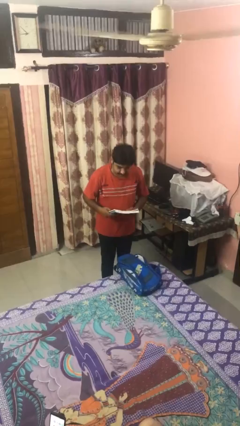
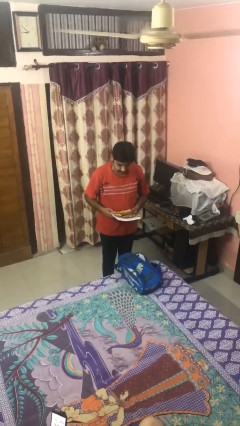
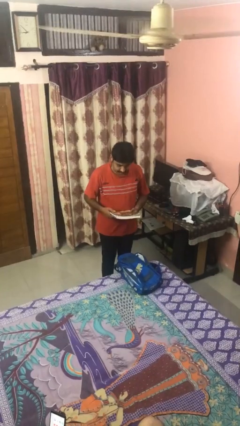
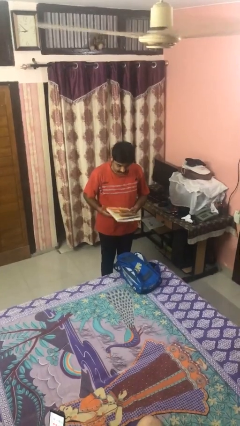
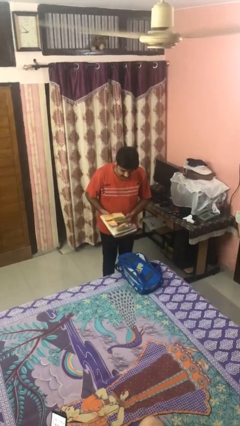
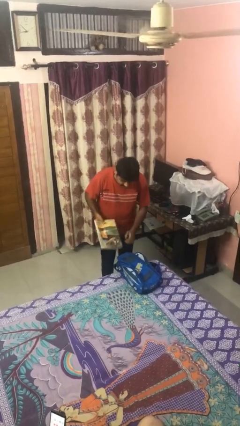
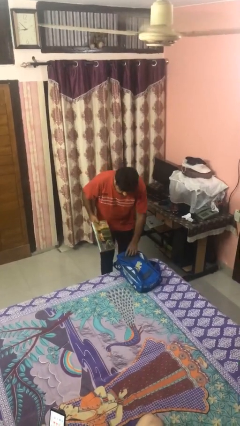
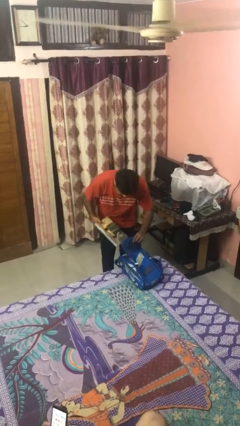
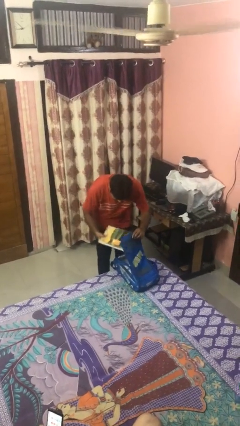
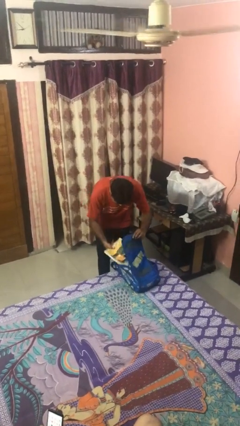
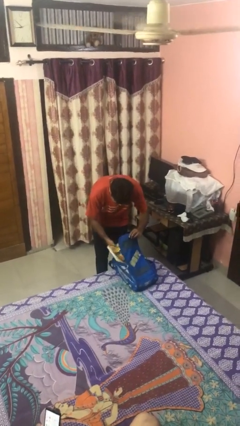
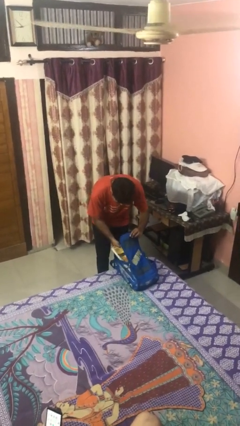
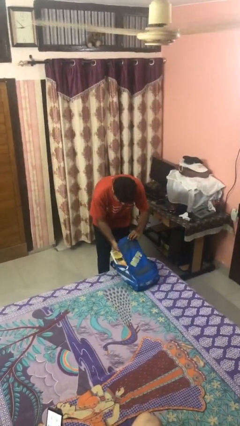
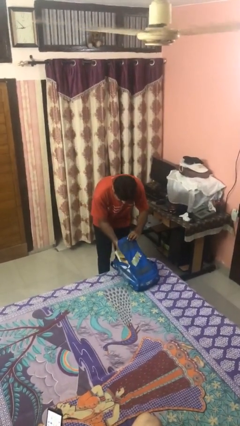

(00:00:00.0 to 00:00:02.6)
person puts object into backpack

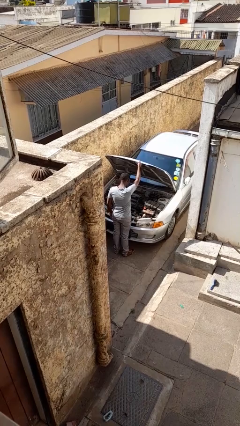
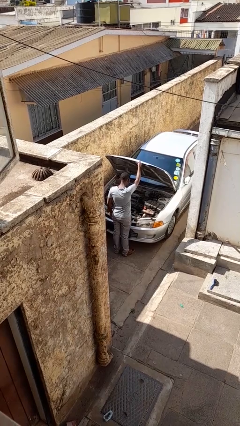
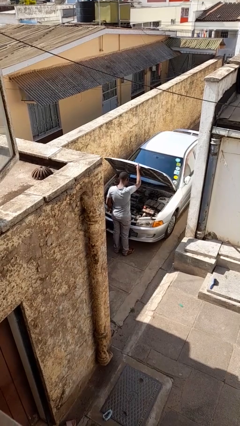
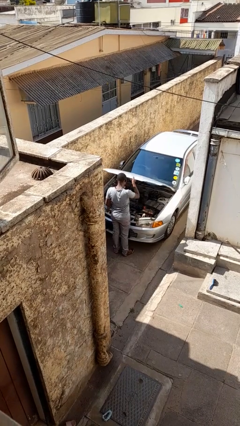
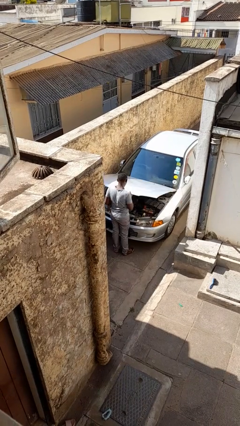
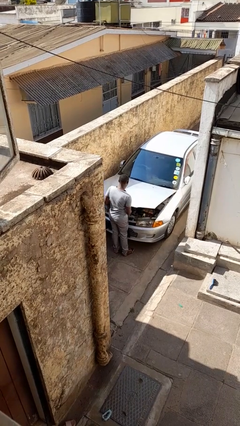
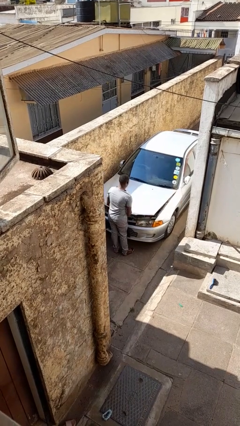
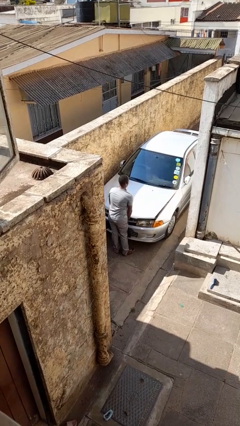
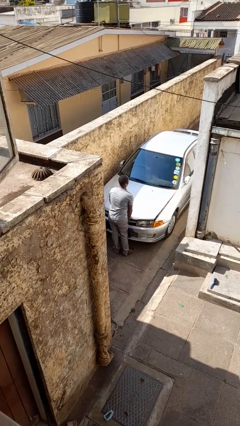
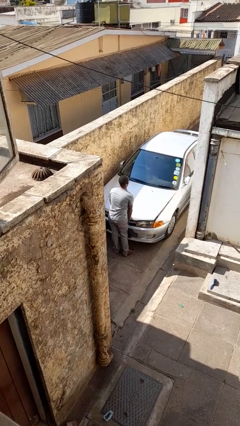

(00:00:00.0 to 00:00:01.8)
person closes car hood

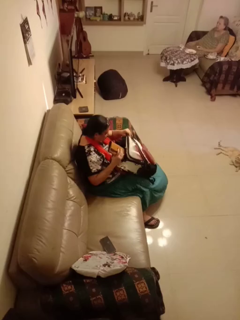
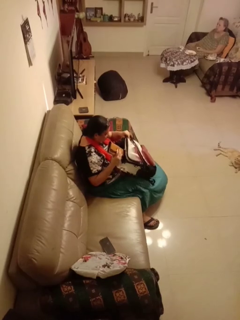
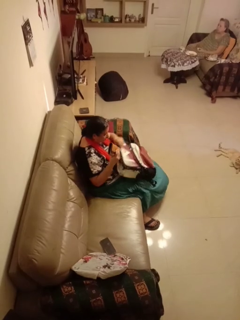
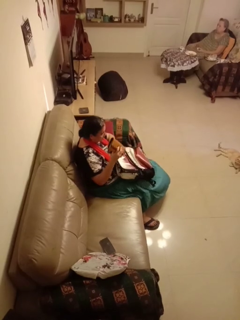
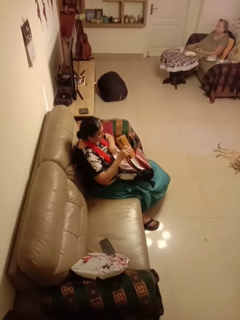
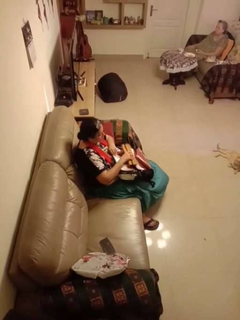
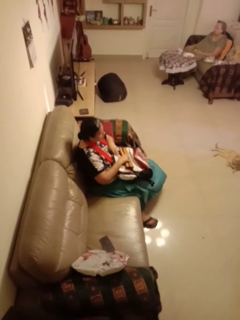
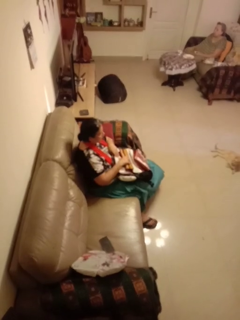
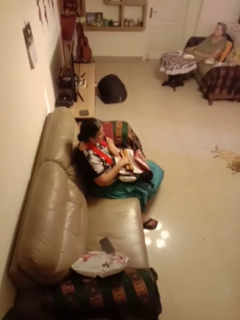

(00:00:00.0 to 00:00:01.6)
person takes object from backpack

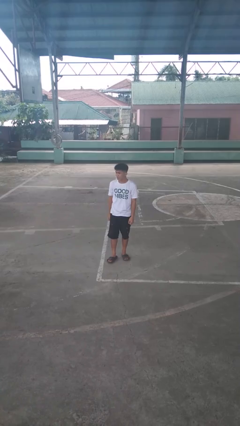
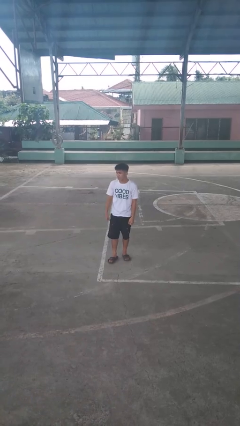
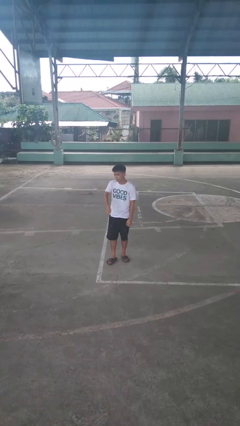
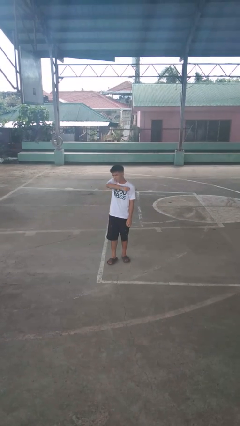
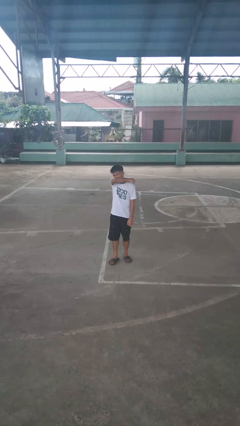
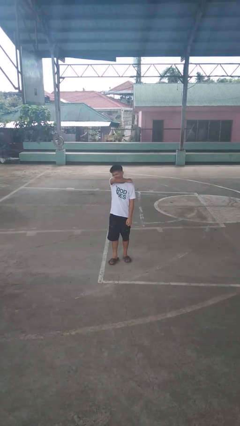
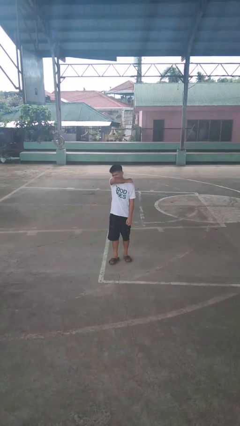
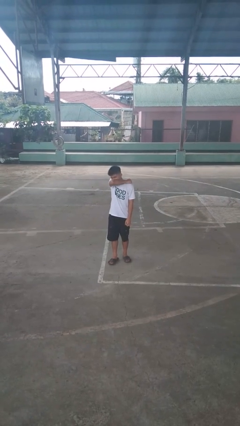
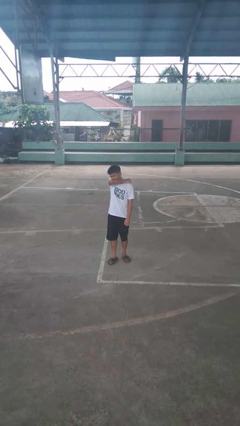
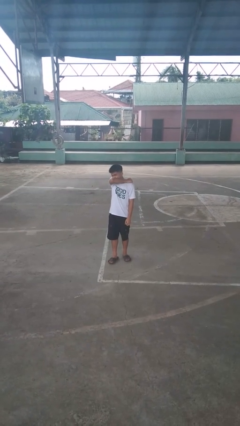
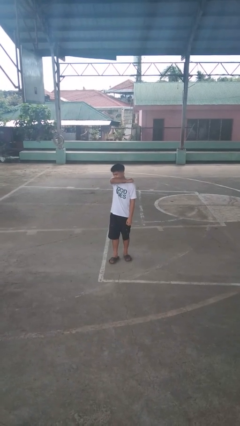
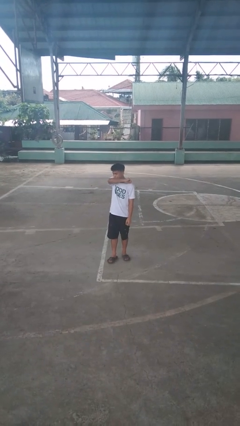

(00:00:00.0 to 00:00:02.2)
person sneezes into arm

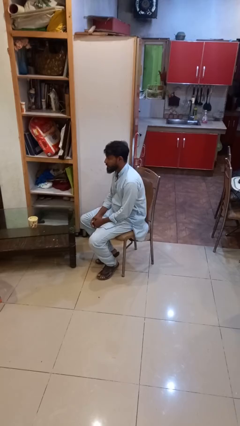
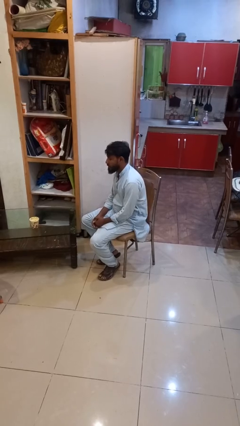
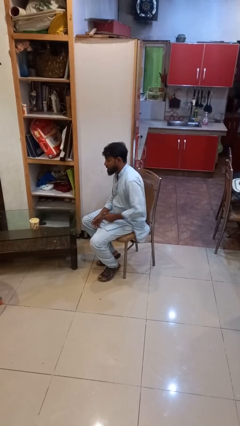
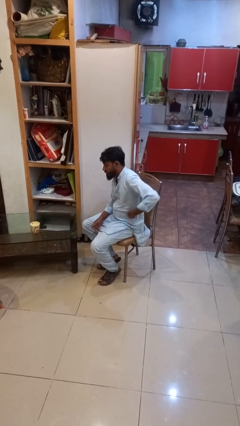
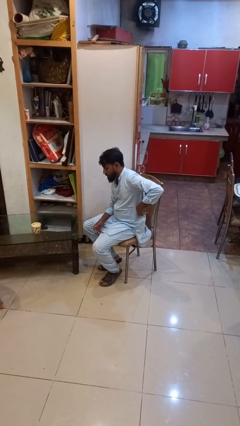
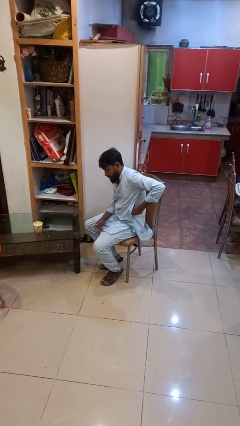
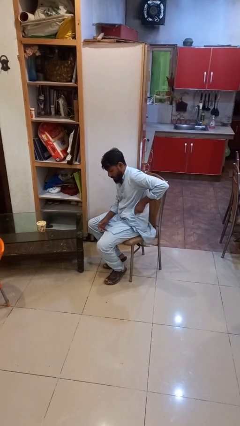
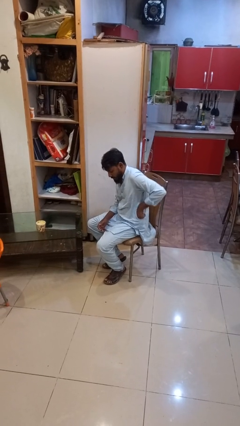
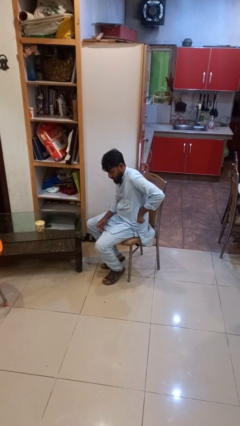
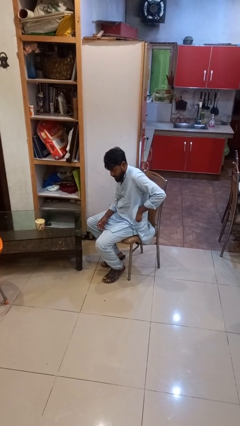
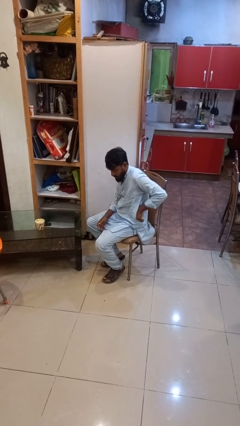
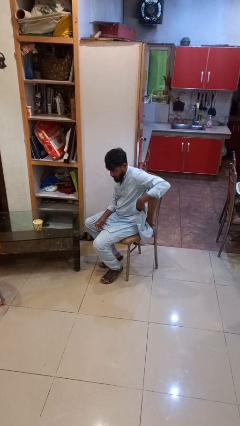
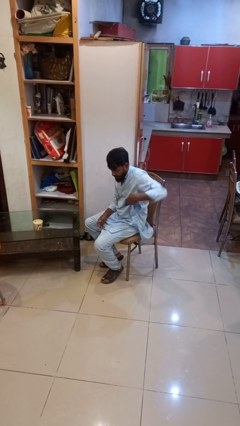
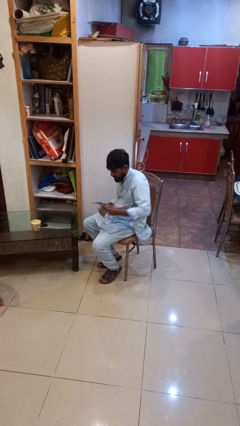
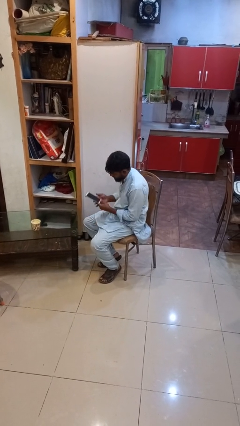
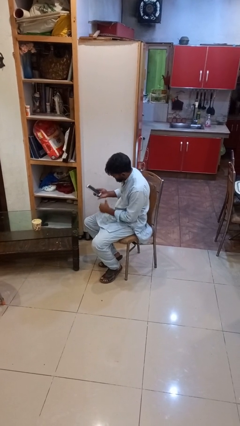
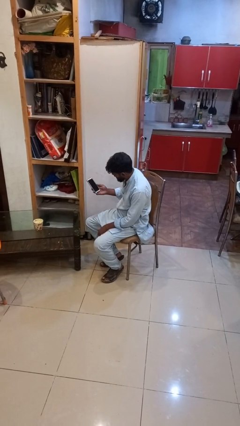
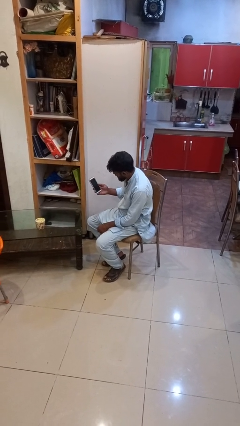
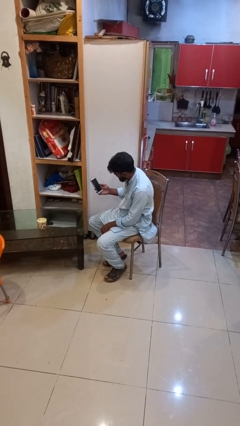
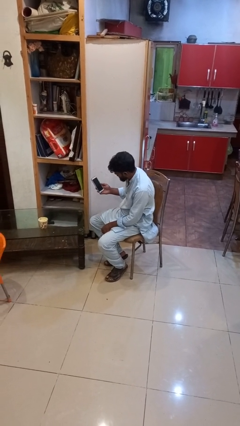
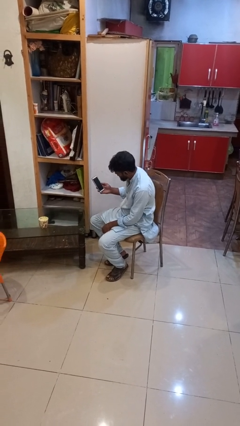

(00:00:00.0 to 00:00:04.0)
person takes phone from pocket

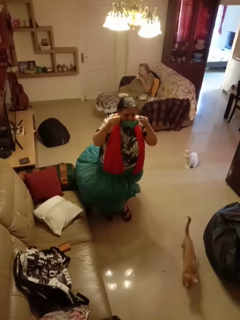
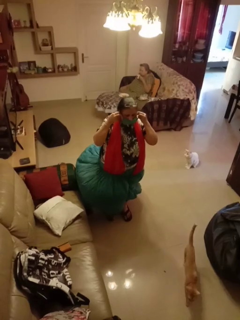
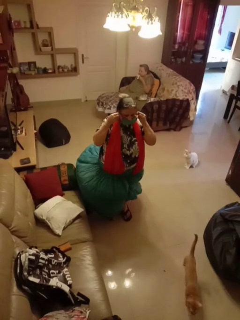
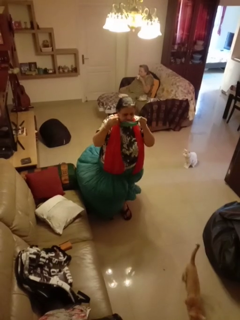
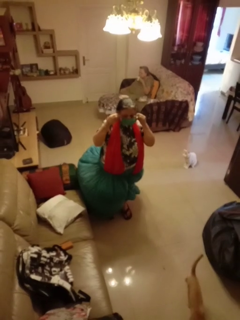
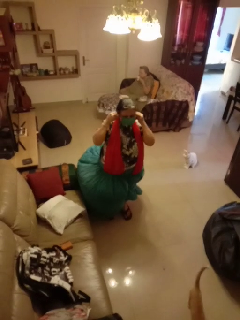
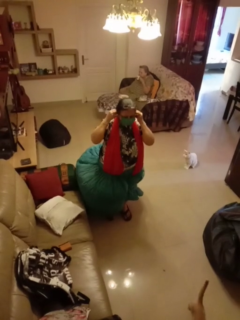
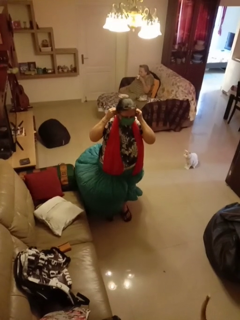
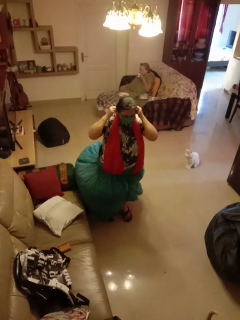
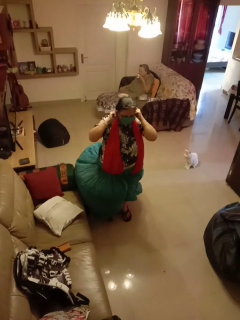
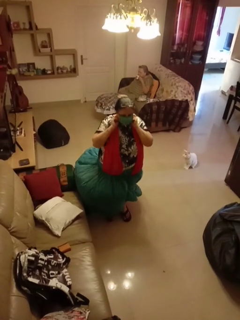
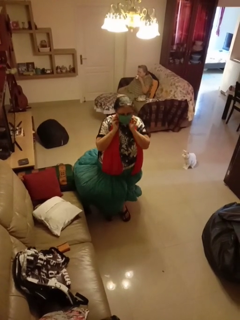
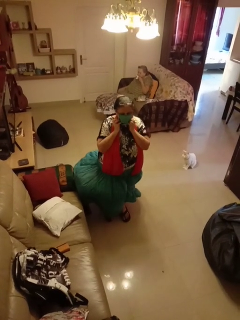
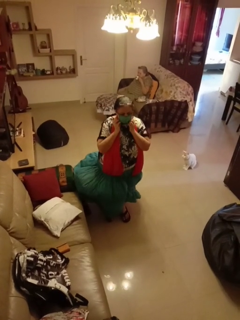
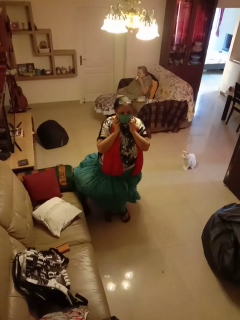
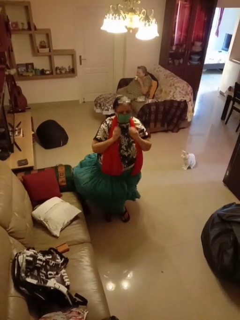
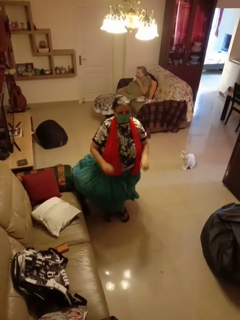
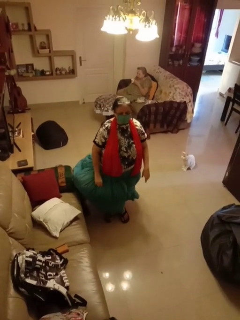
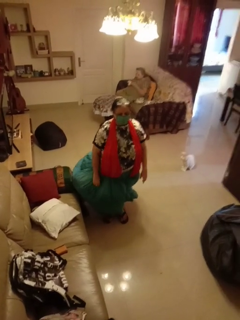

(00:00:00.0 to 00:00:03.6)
person puts on facemask

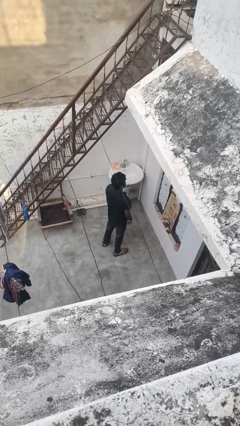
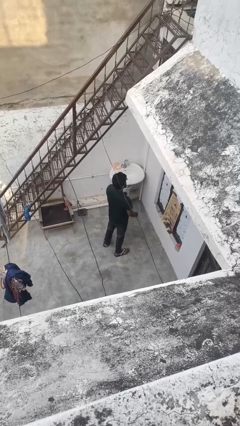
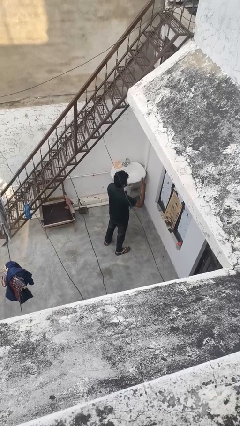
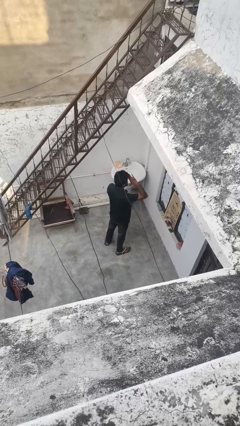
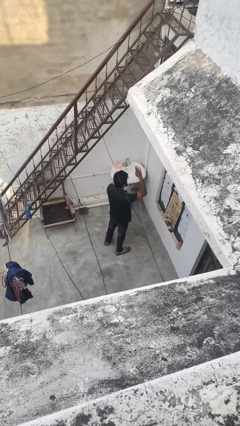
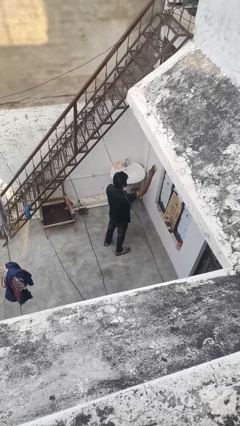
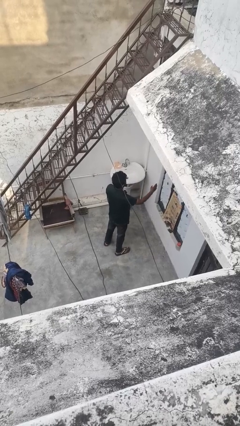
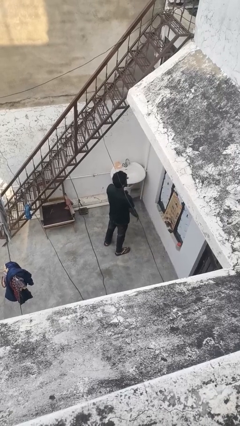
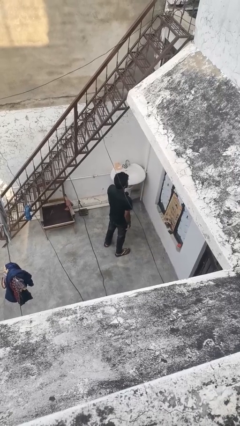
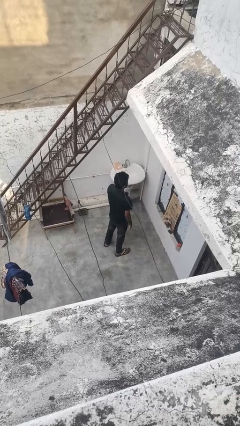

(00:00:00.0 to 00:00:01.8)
person salutes

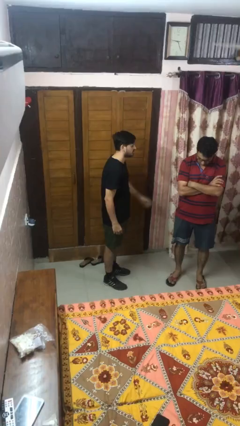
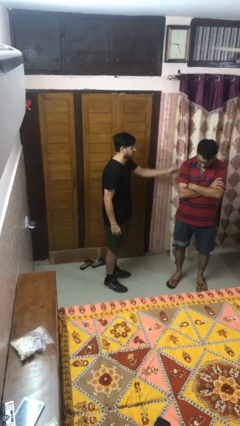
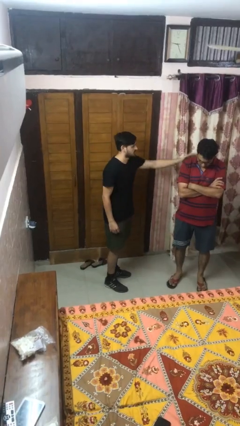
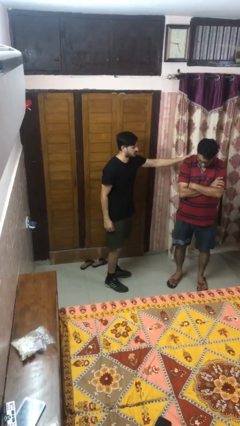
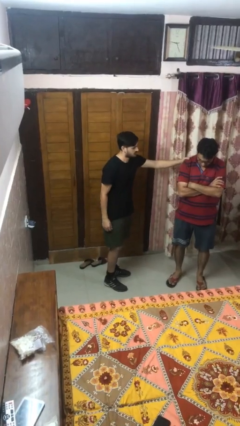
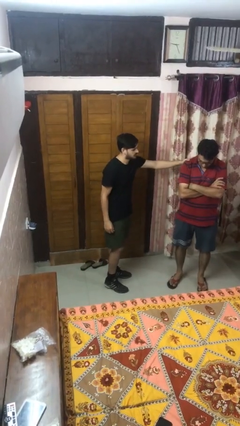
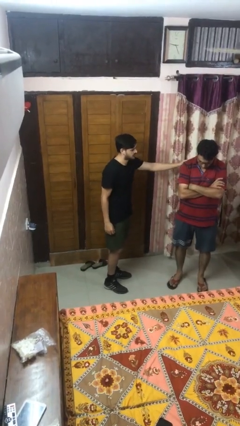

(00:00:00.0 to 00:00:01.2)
person pounds shoulders of person
